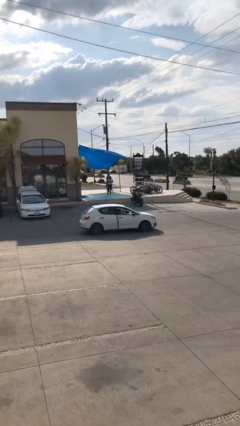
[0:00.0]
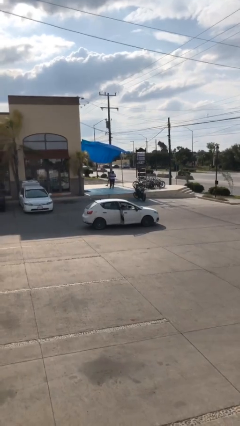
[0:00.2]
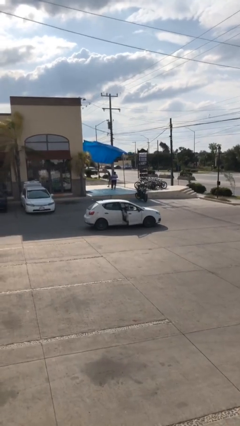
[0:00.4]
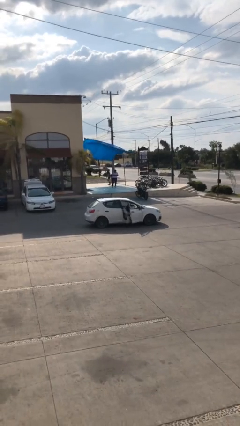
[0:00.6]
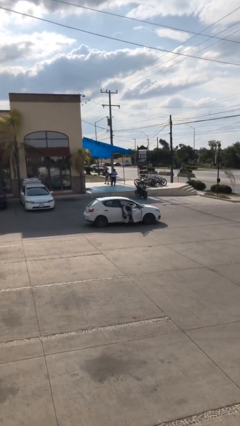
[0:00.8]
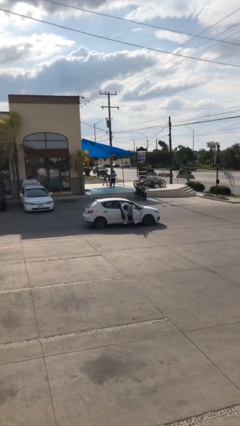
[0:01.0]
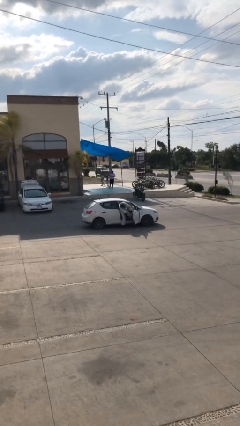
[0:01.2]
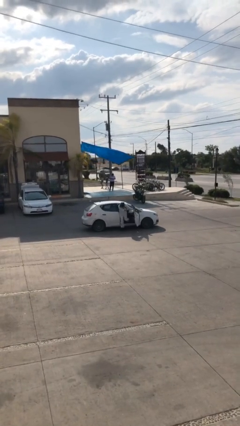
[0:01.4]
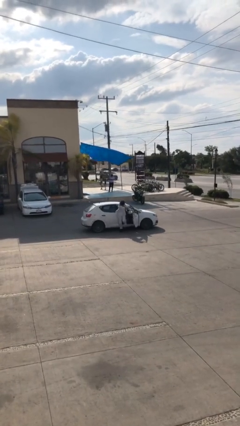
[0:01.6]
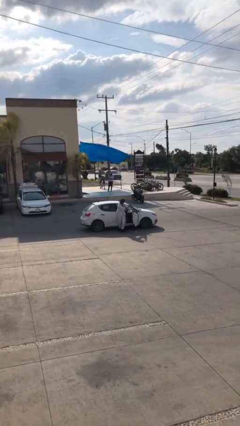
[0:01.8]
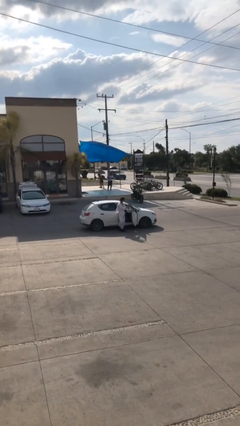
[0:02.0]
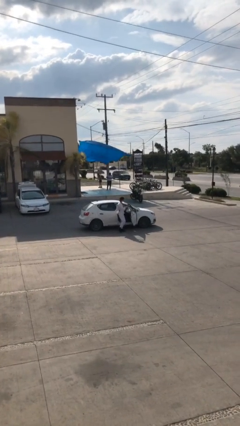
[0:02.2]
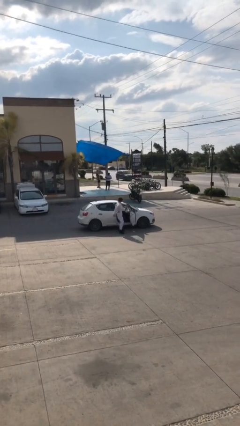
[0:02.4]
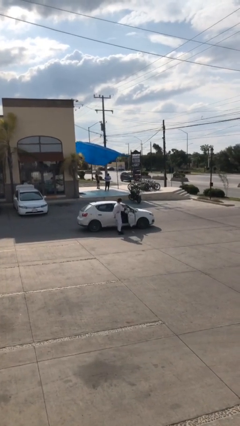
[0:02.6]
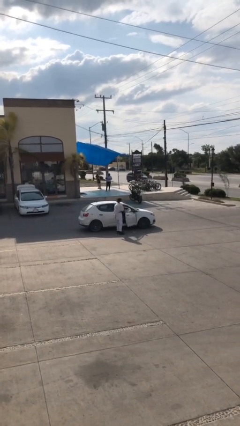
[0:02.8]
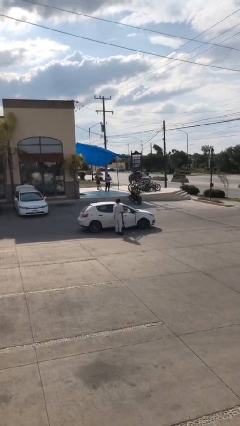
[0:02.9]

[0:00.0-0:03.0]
car drops off person

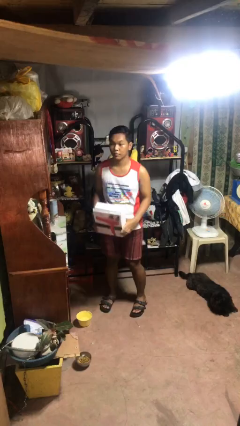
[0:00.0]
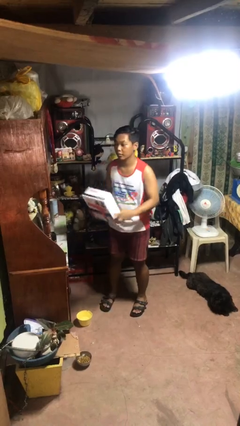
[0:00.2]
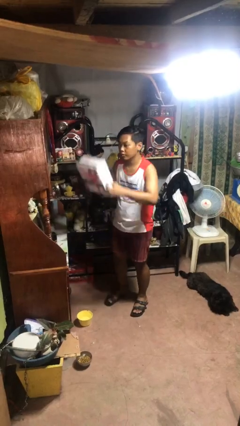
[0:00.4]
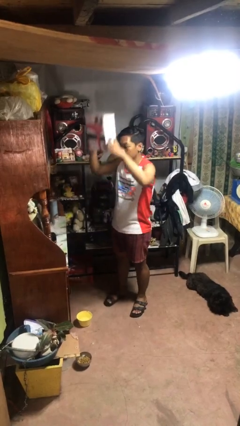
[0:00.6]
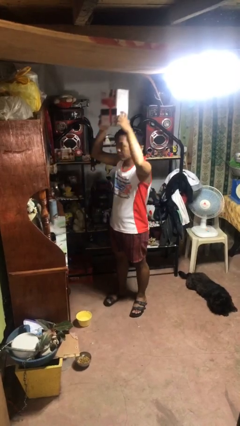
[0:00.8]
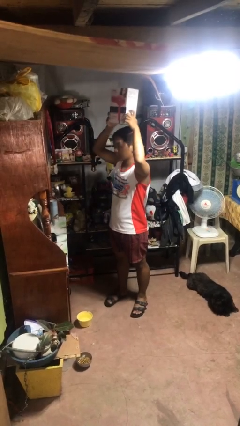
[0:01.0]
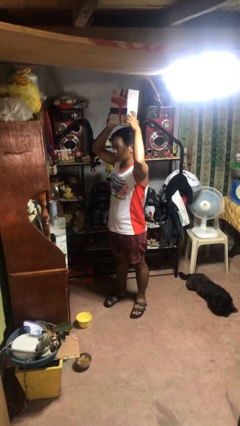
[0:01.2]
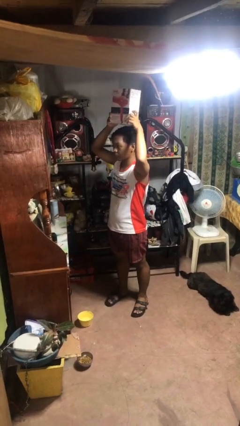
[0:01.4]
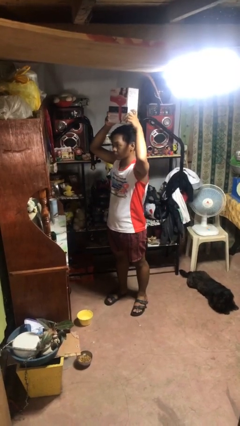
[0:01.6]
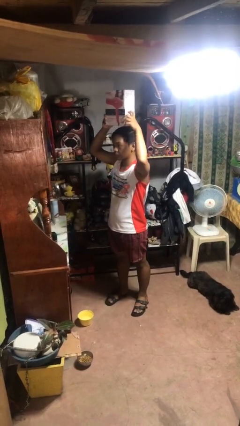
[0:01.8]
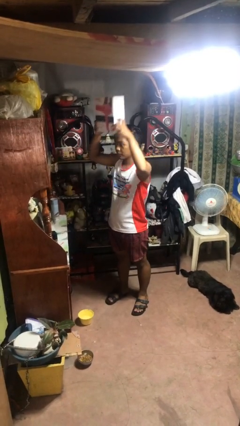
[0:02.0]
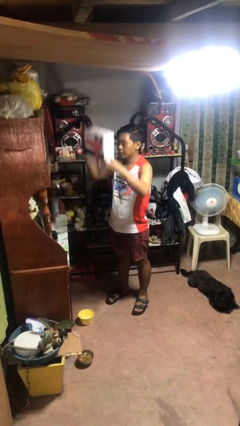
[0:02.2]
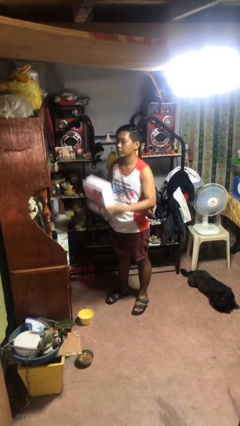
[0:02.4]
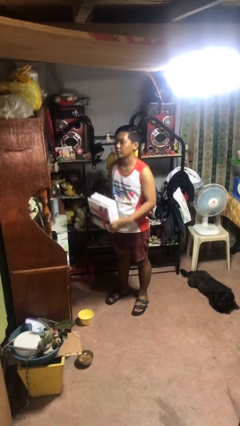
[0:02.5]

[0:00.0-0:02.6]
person holds object above head

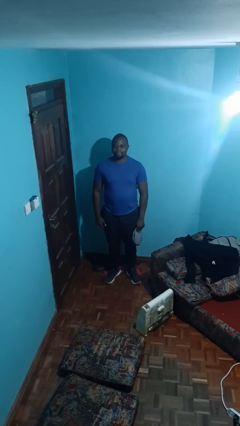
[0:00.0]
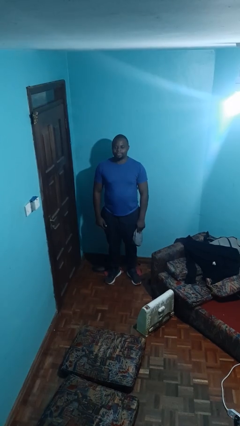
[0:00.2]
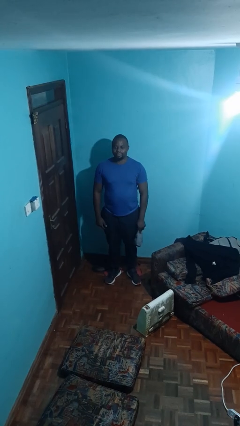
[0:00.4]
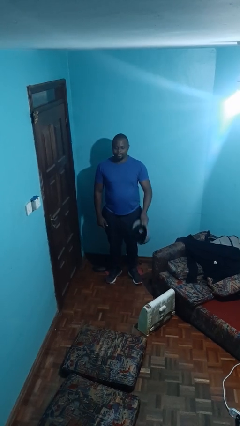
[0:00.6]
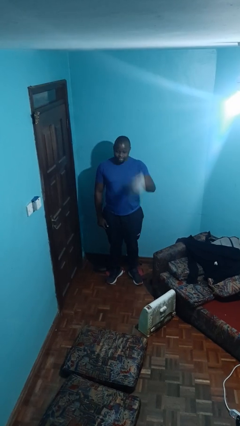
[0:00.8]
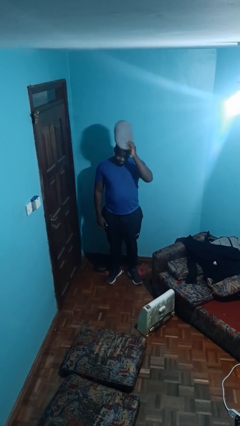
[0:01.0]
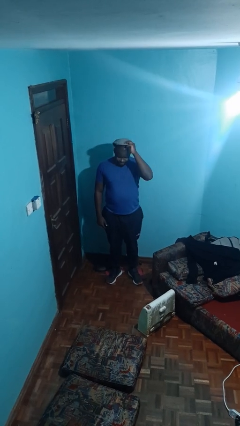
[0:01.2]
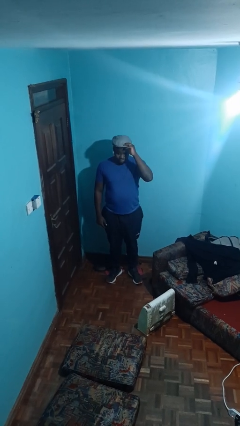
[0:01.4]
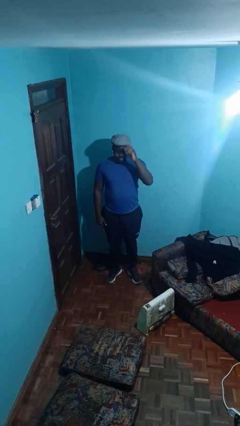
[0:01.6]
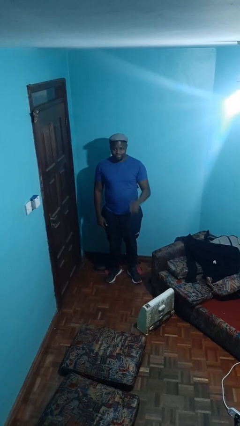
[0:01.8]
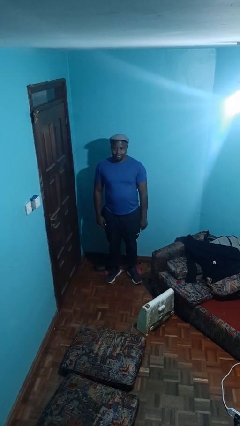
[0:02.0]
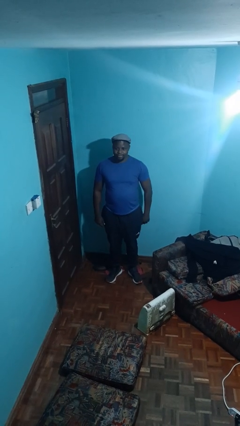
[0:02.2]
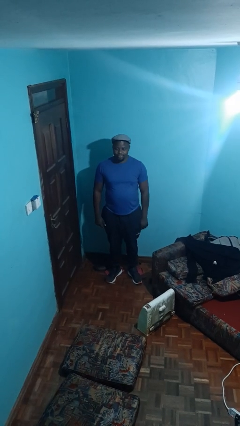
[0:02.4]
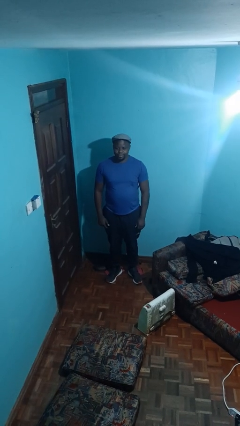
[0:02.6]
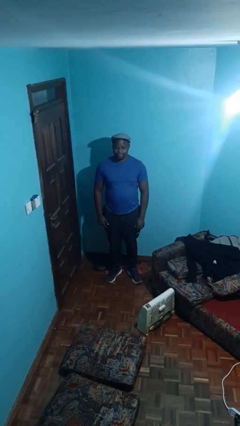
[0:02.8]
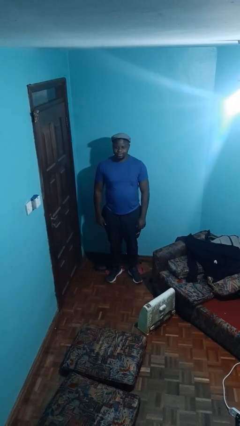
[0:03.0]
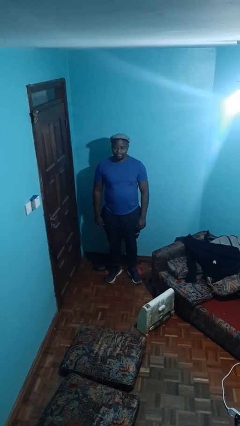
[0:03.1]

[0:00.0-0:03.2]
person puts on hat

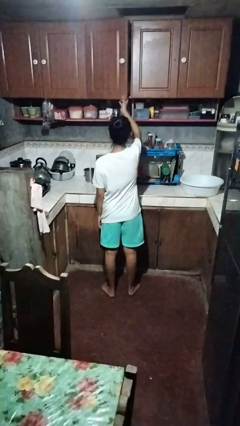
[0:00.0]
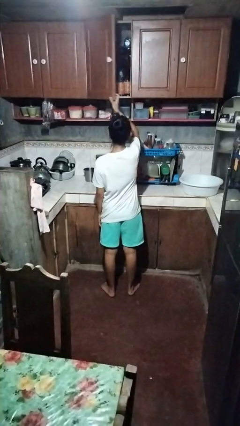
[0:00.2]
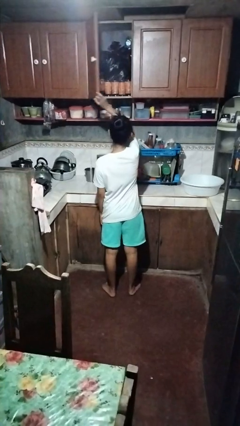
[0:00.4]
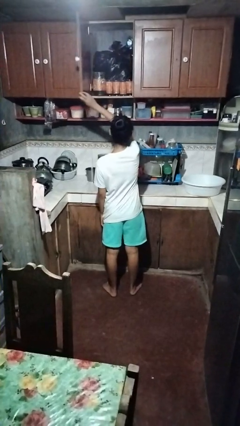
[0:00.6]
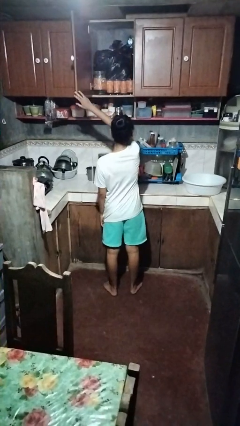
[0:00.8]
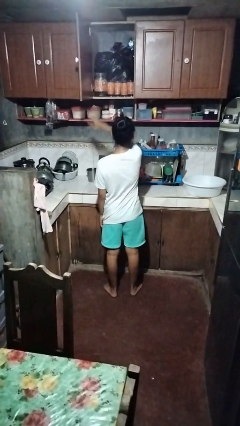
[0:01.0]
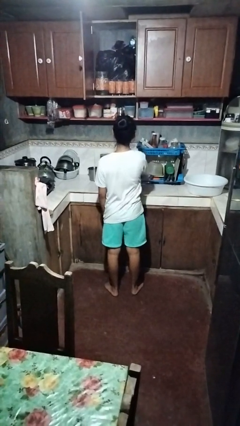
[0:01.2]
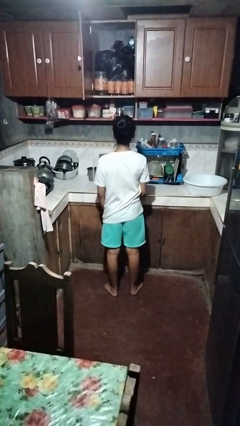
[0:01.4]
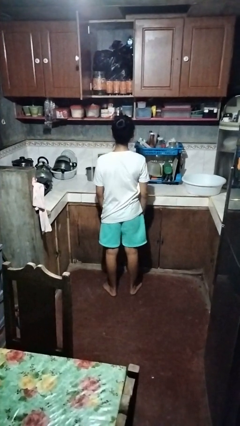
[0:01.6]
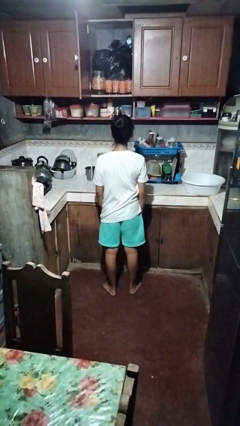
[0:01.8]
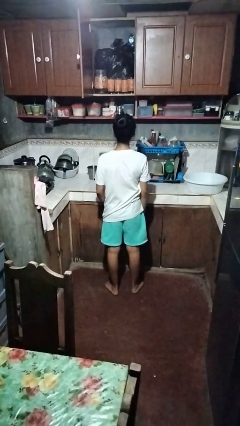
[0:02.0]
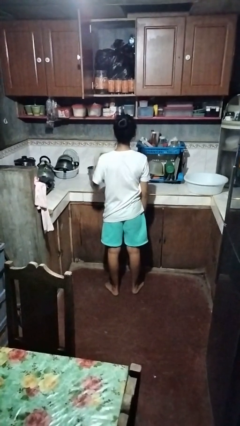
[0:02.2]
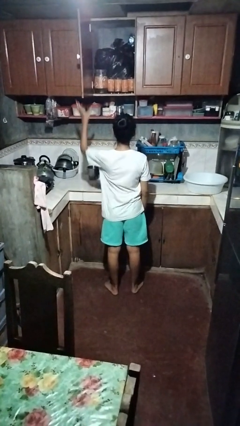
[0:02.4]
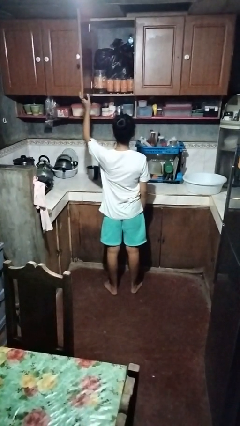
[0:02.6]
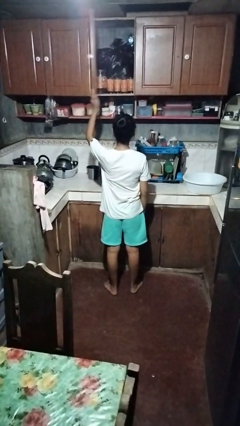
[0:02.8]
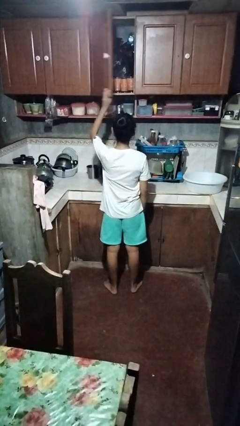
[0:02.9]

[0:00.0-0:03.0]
person opens cabinet

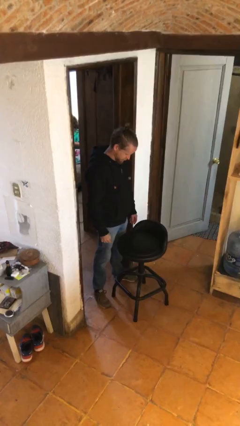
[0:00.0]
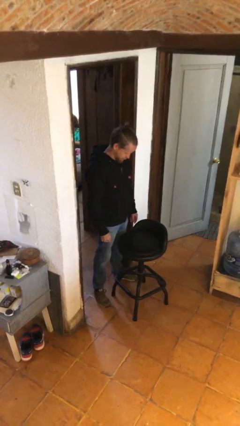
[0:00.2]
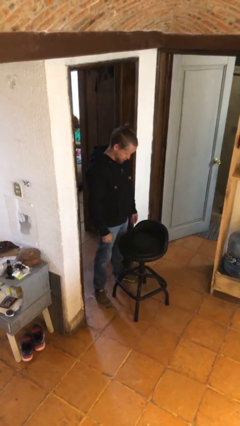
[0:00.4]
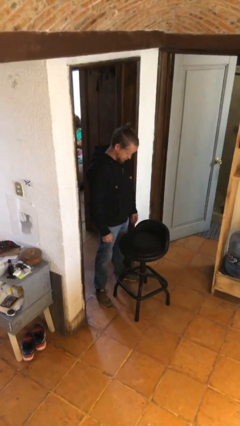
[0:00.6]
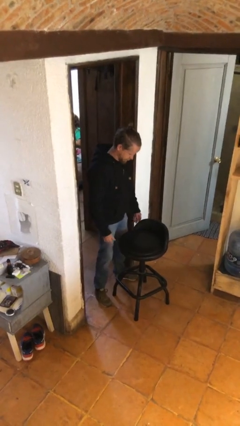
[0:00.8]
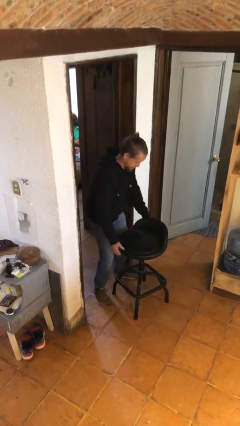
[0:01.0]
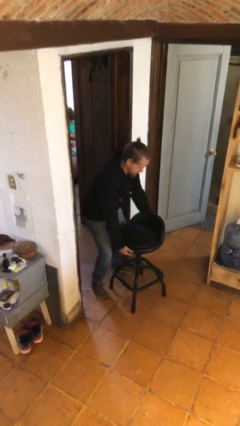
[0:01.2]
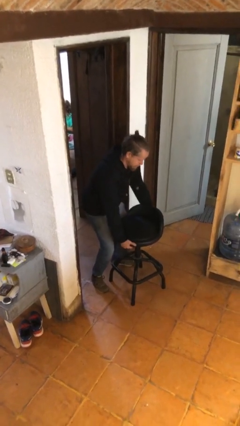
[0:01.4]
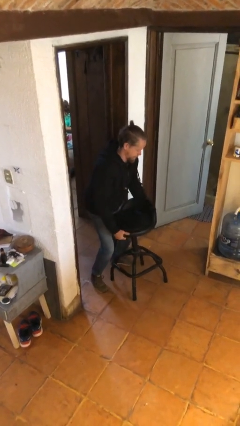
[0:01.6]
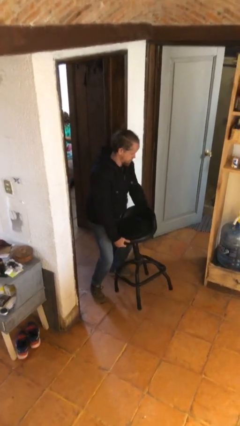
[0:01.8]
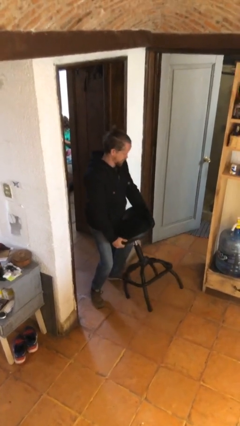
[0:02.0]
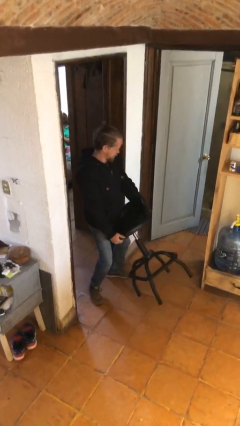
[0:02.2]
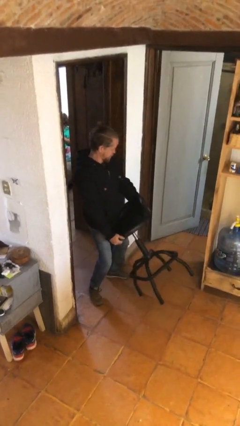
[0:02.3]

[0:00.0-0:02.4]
person picks up object from floor

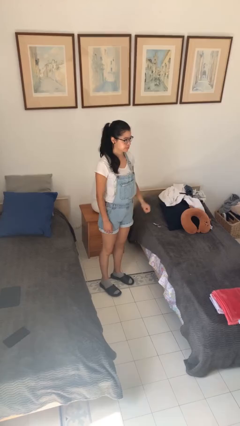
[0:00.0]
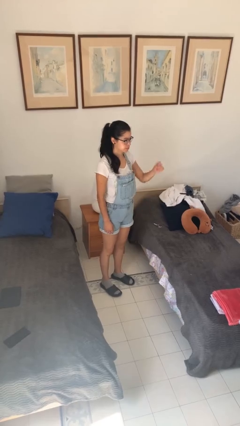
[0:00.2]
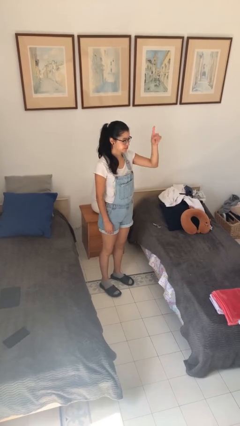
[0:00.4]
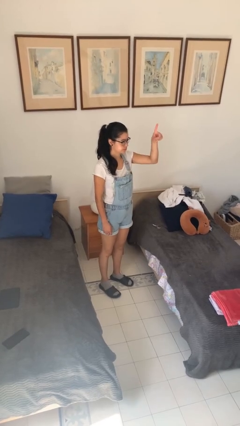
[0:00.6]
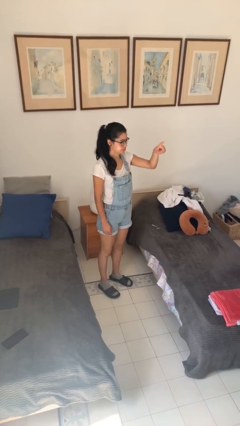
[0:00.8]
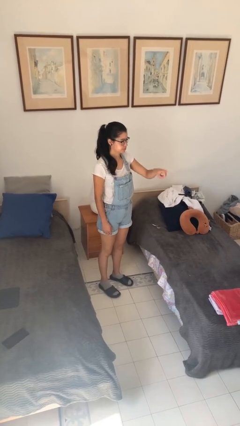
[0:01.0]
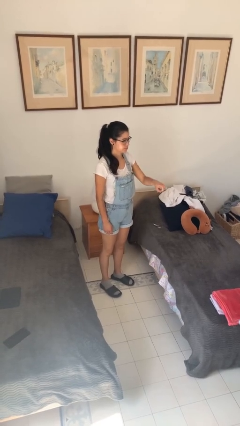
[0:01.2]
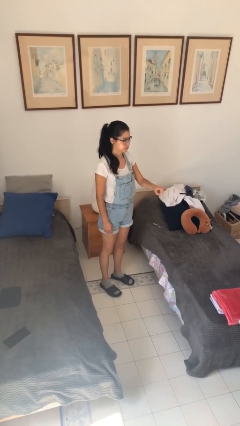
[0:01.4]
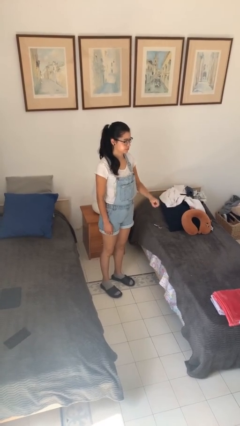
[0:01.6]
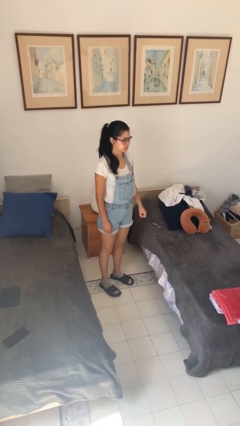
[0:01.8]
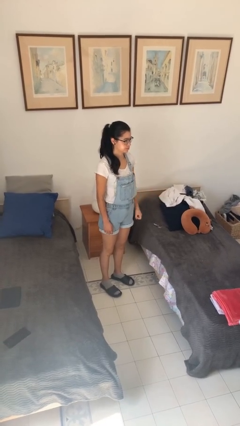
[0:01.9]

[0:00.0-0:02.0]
person gestures number one

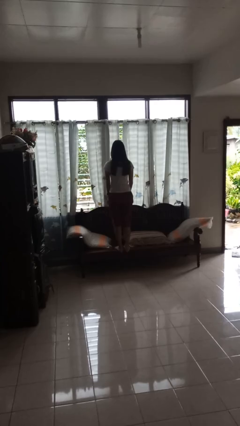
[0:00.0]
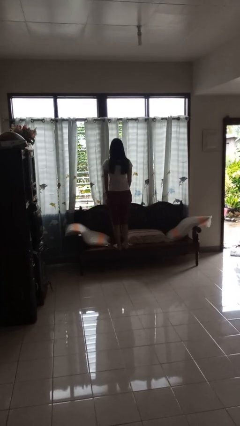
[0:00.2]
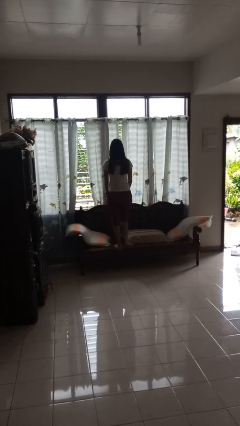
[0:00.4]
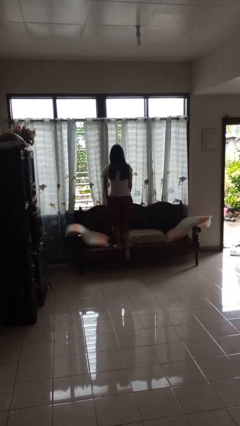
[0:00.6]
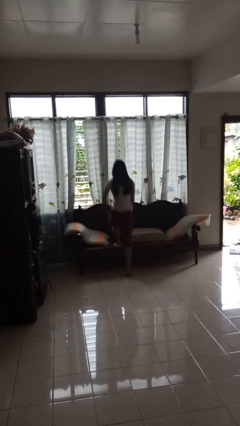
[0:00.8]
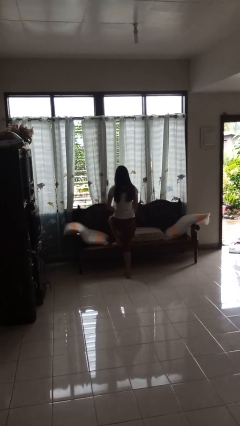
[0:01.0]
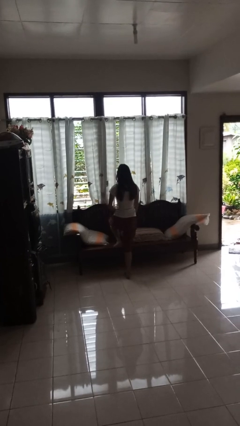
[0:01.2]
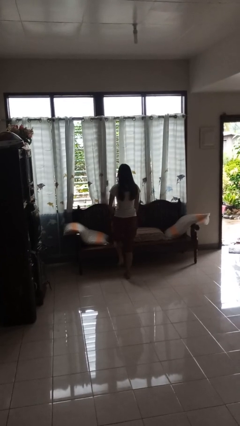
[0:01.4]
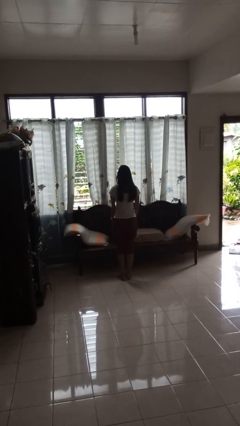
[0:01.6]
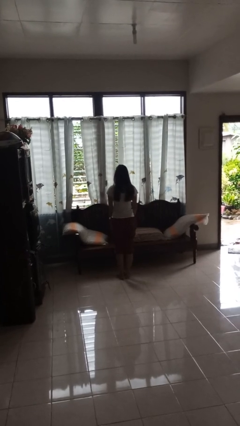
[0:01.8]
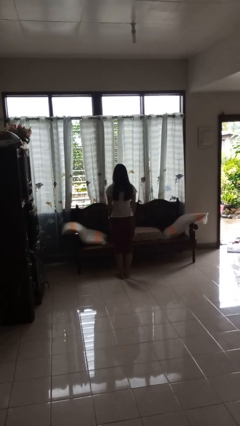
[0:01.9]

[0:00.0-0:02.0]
person climbs off couch
